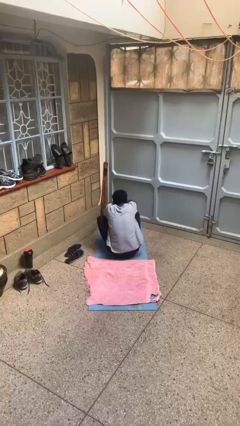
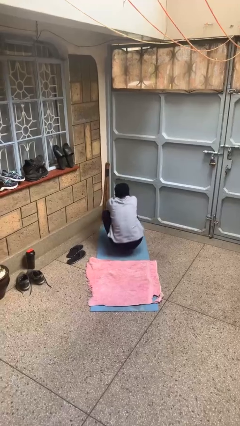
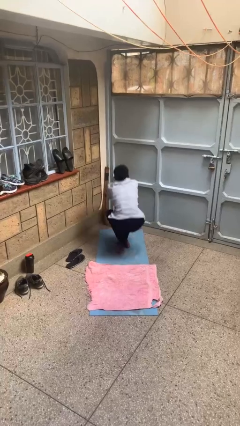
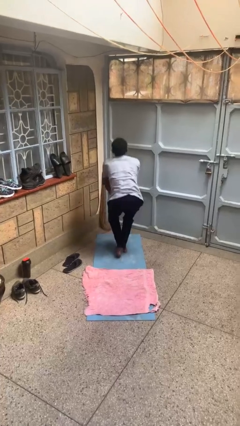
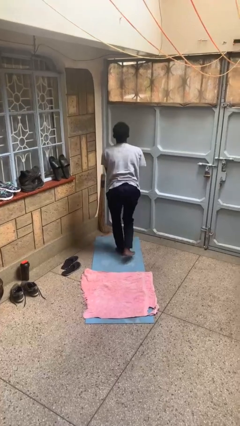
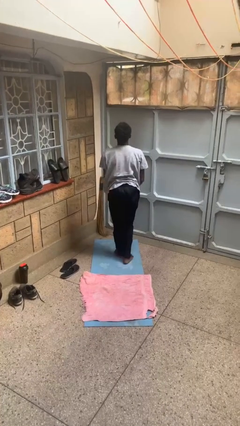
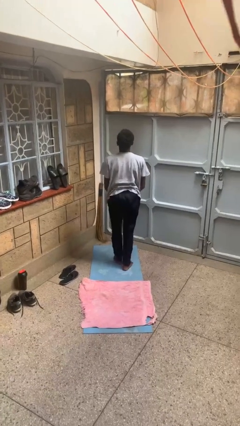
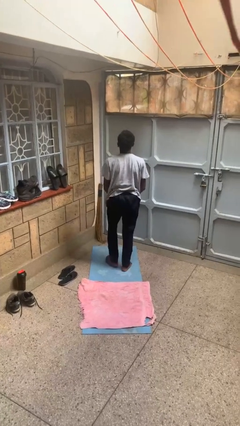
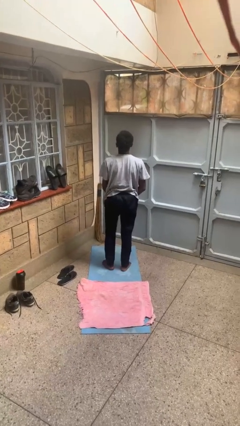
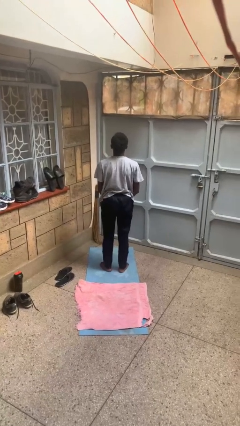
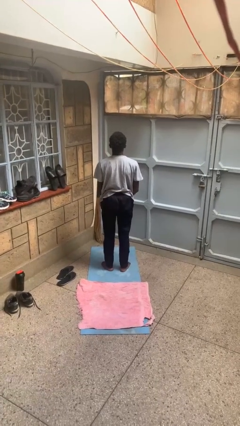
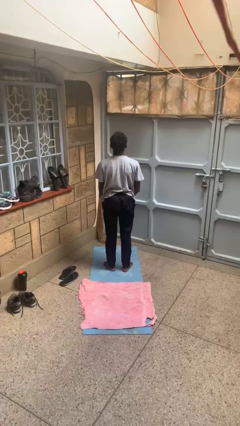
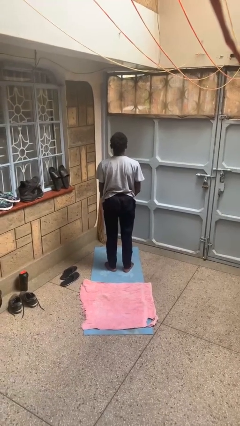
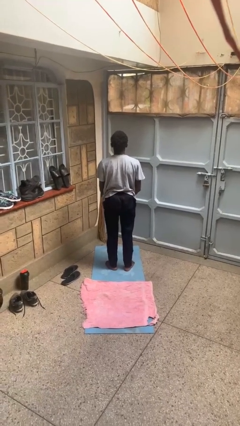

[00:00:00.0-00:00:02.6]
person stands up from floor

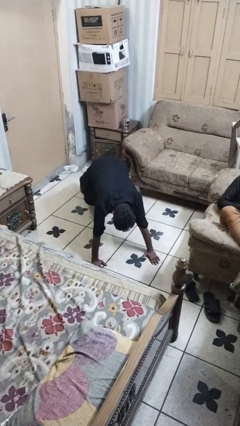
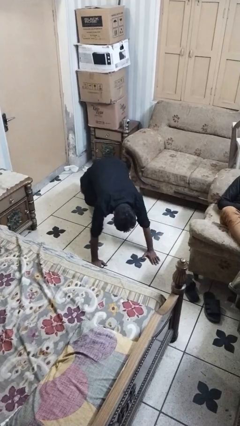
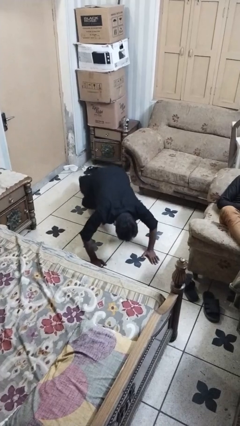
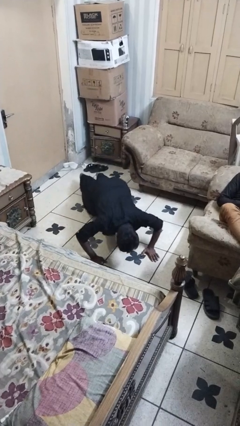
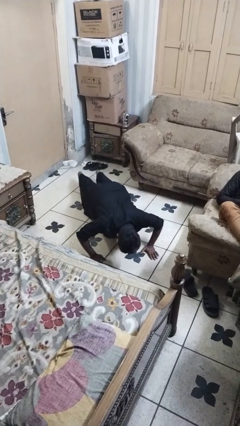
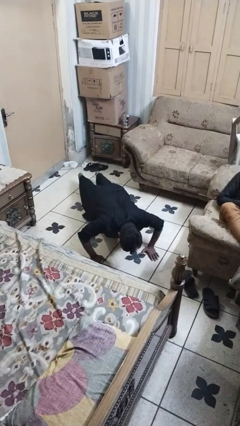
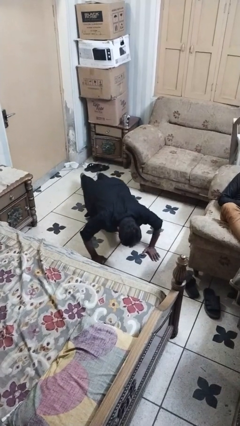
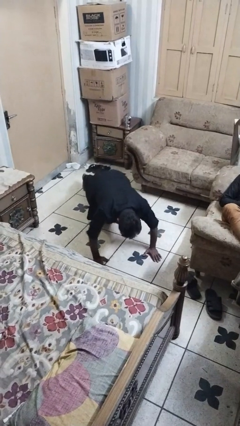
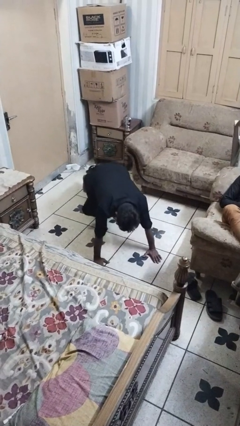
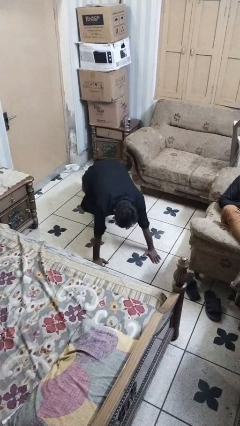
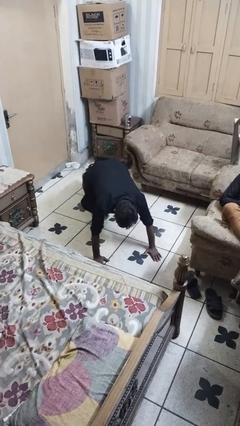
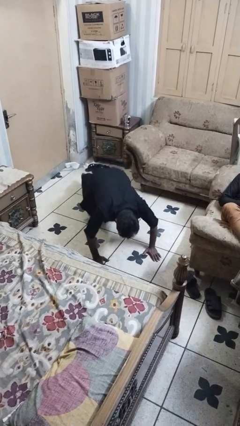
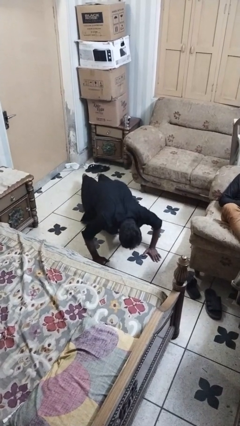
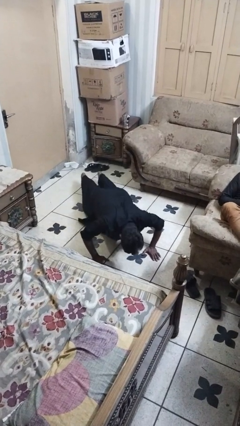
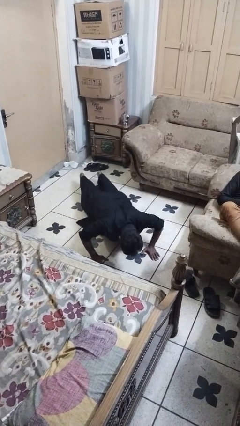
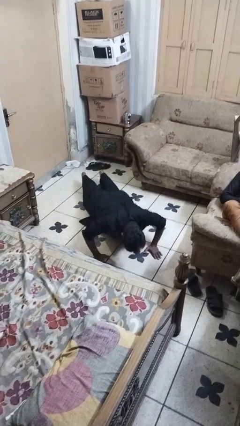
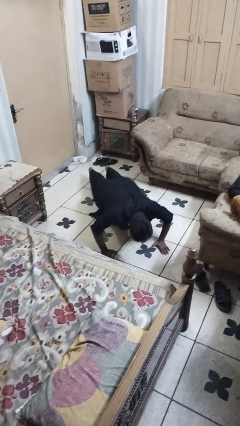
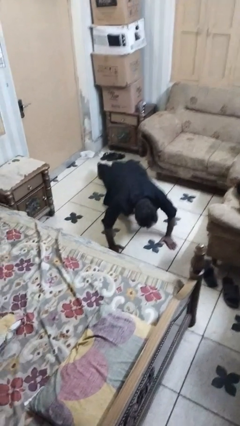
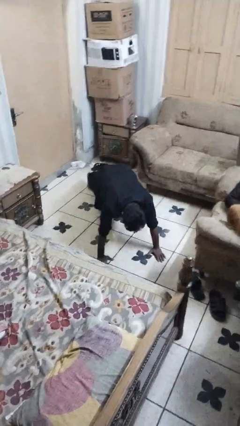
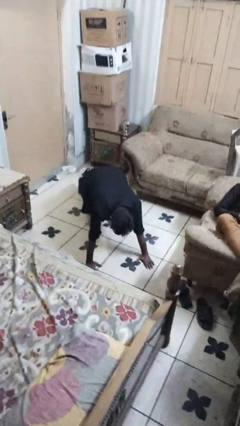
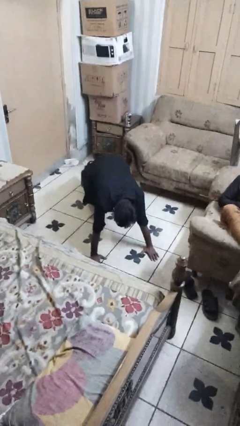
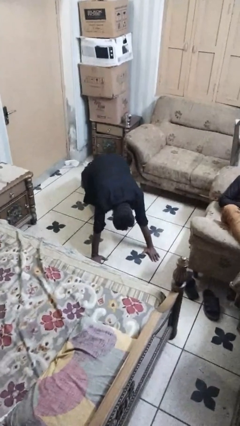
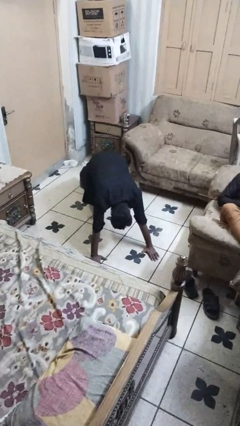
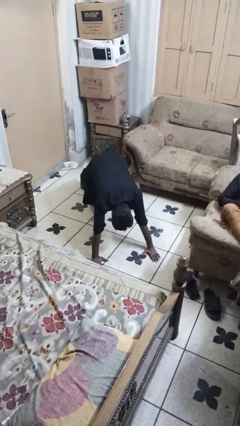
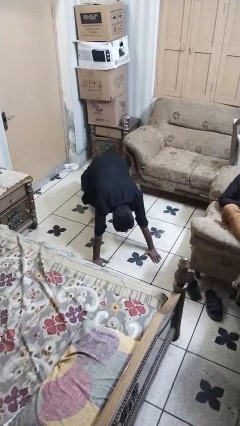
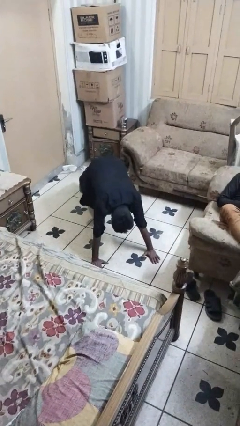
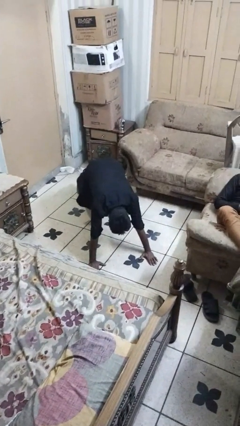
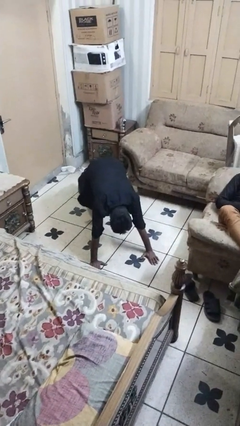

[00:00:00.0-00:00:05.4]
person exercises with pushup

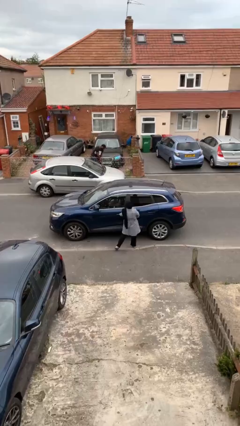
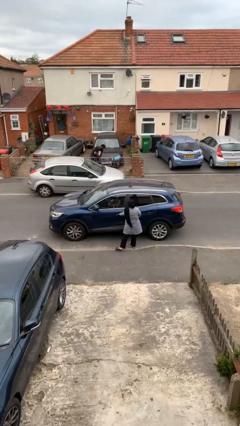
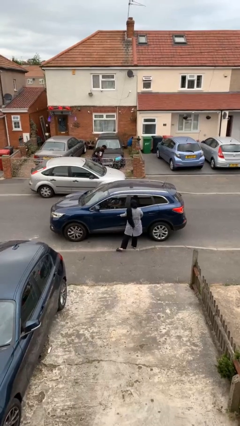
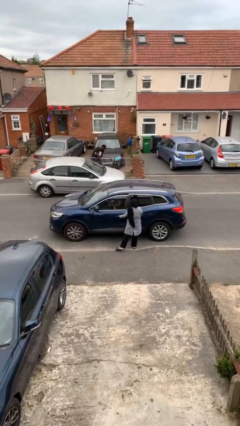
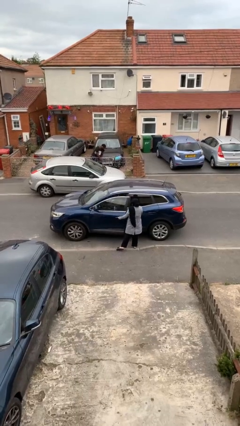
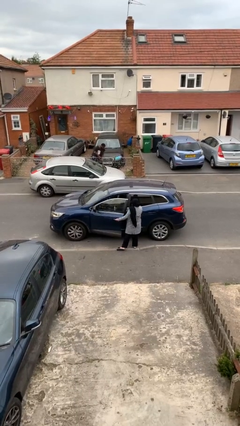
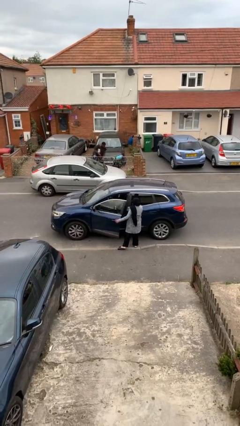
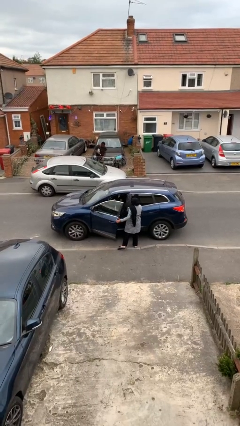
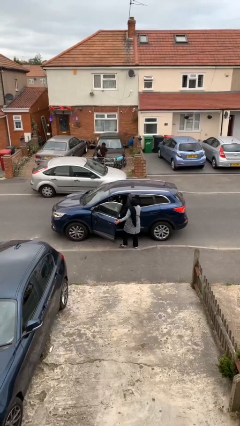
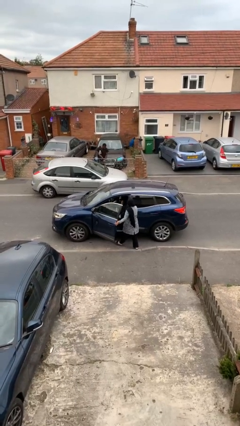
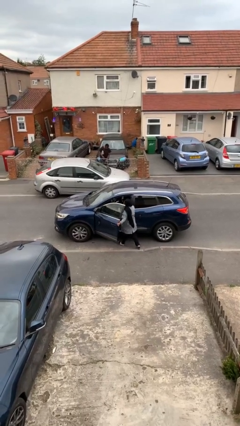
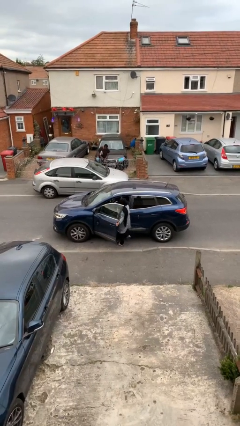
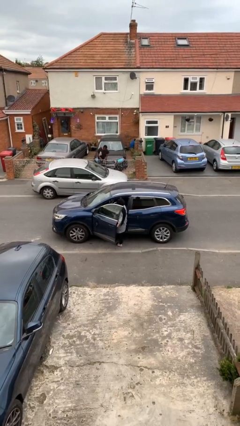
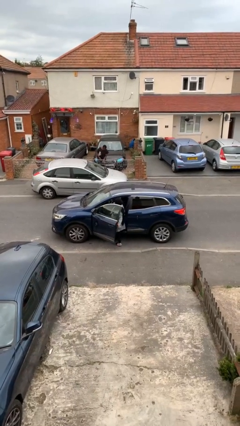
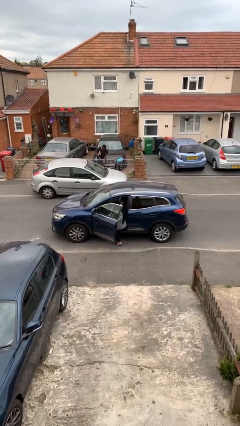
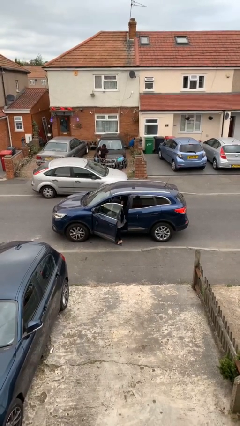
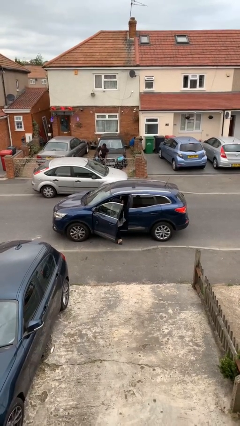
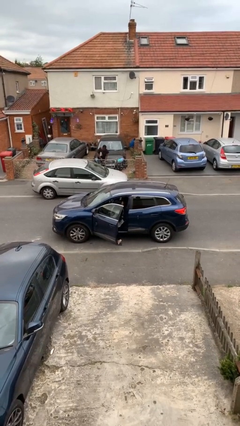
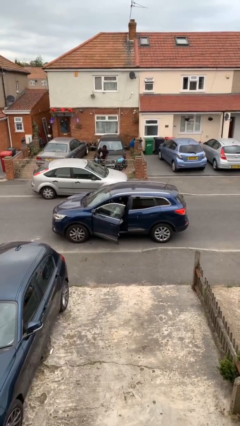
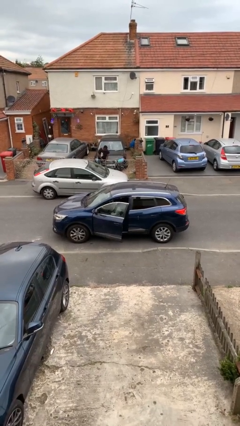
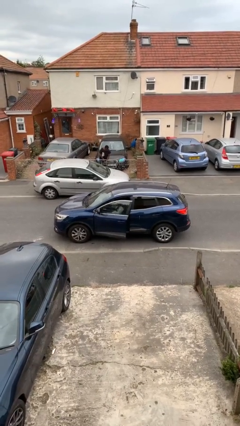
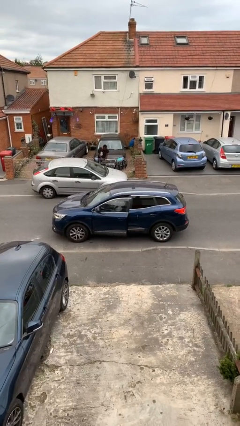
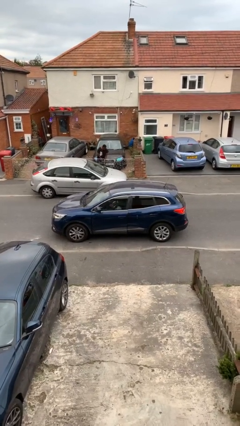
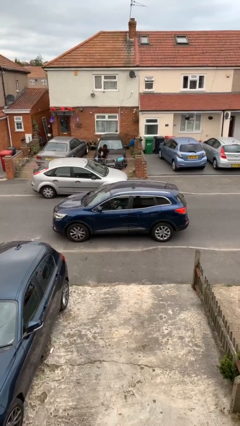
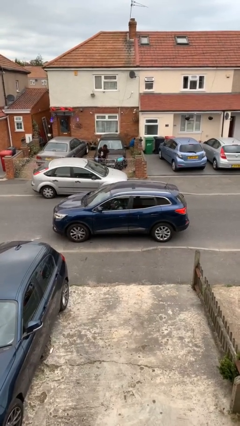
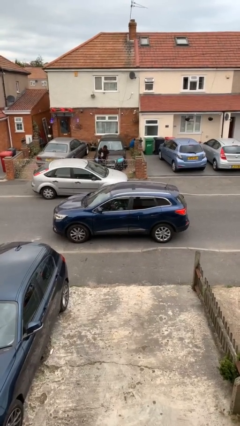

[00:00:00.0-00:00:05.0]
car picks up person

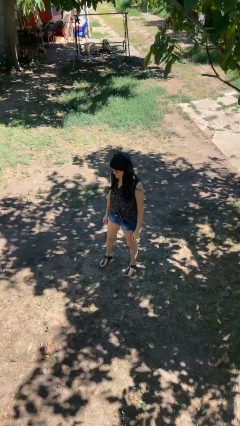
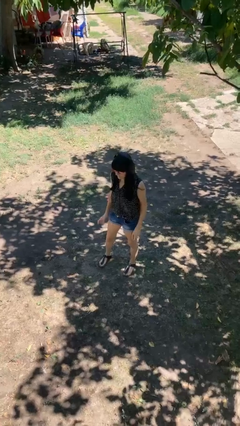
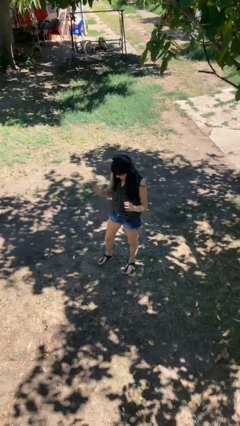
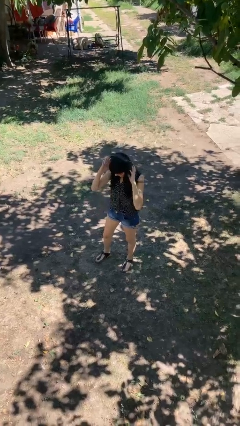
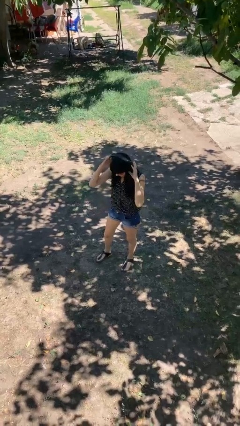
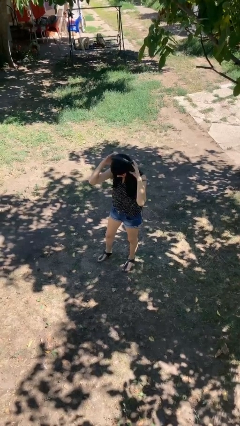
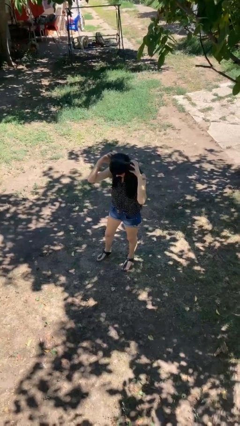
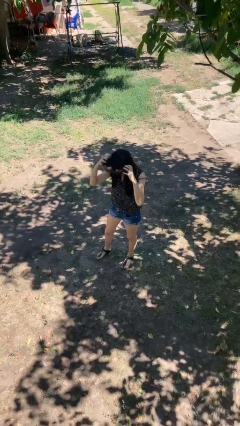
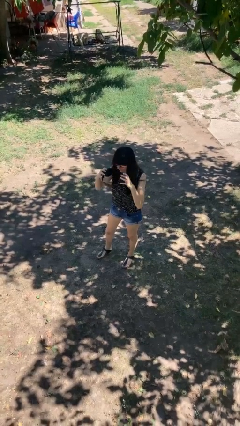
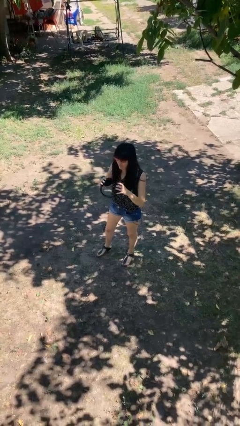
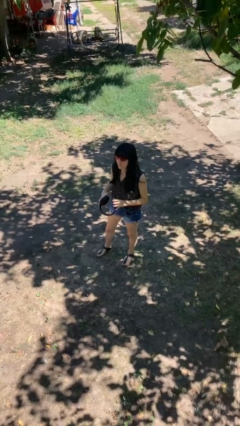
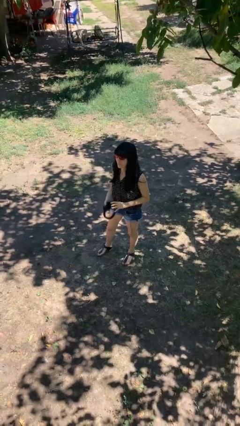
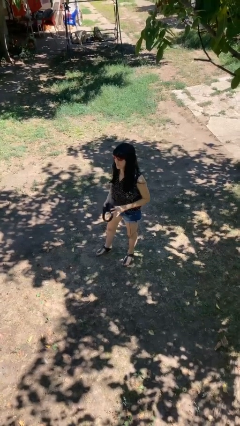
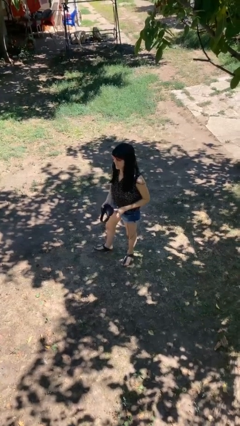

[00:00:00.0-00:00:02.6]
person takes off headphones

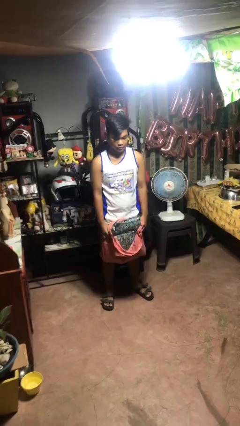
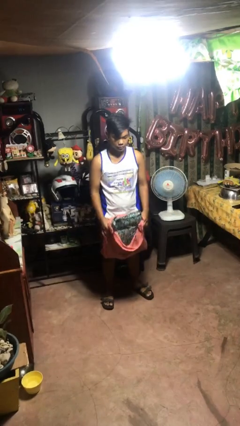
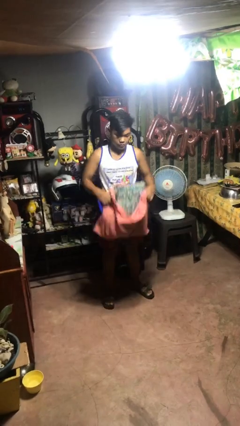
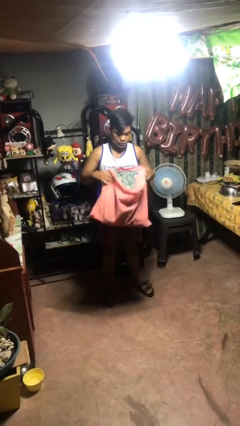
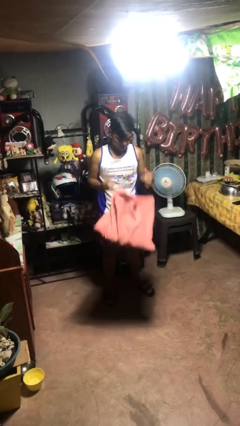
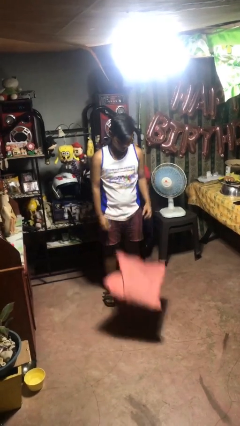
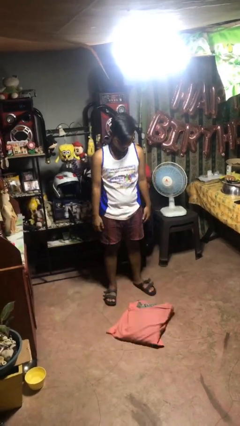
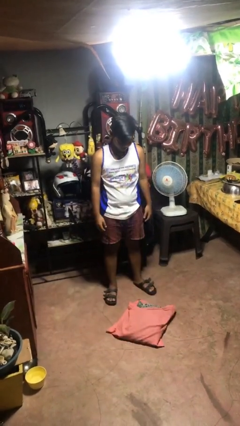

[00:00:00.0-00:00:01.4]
person drops object

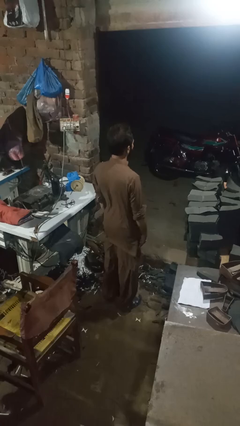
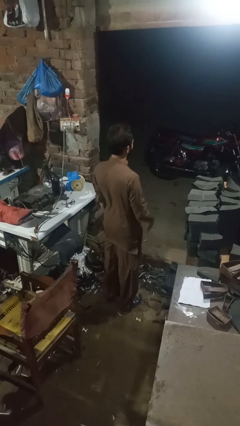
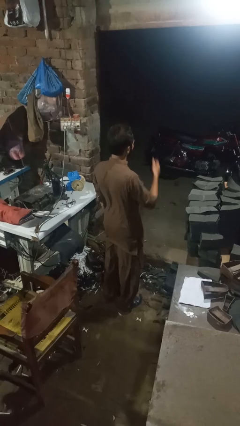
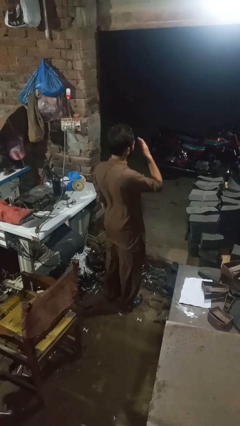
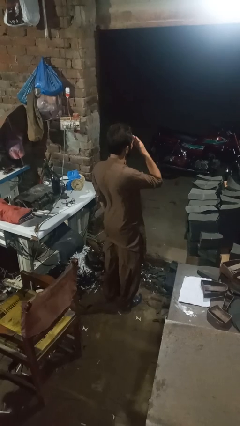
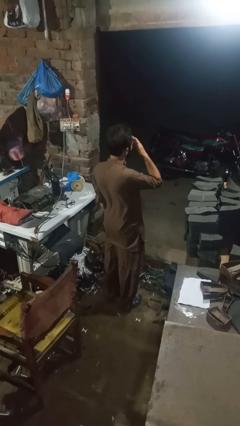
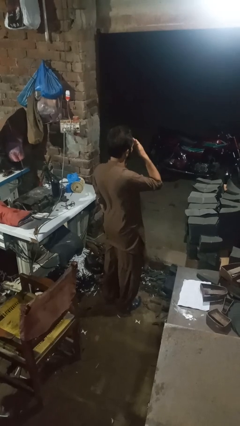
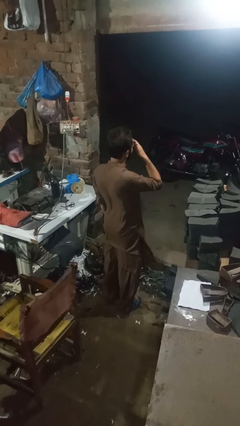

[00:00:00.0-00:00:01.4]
person rubs eyes
